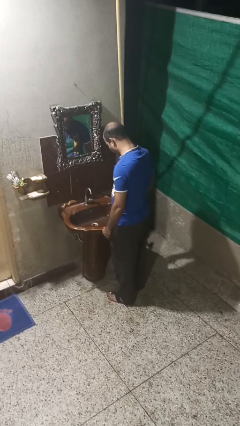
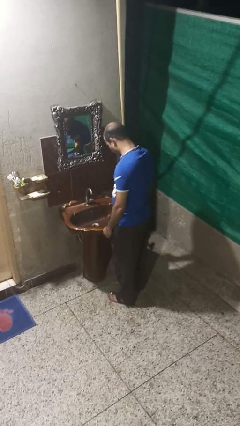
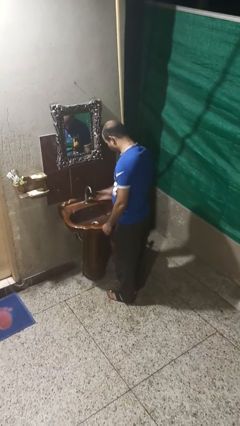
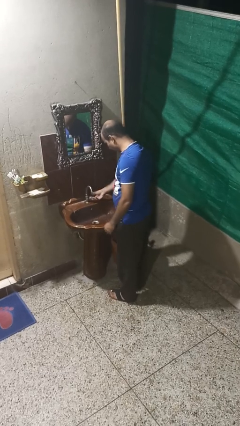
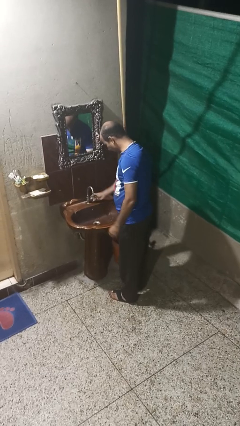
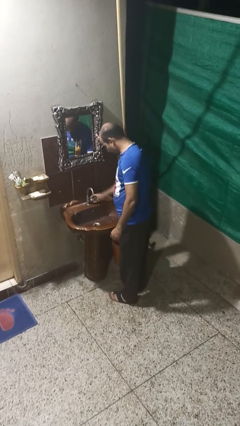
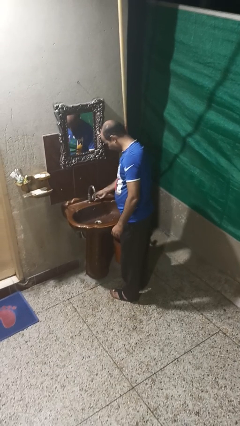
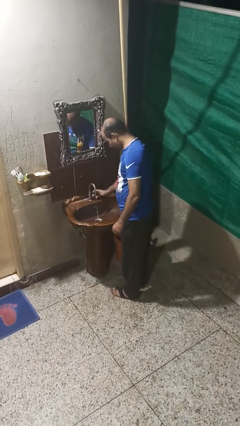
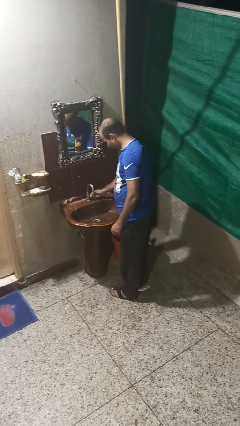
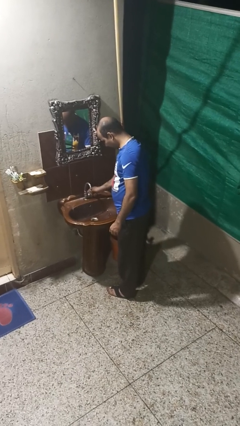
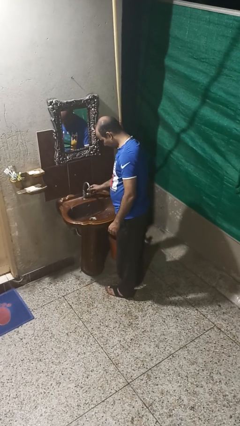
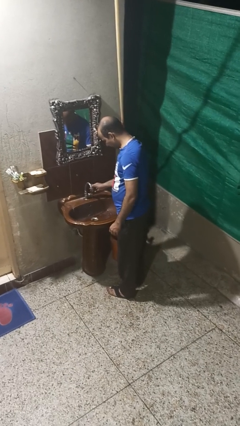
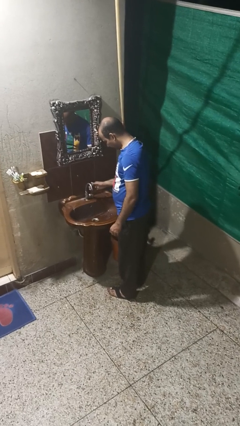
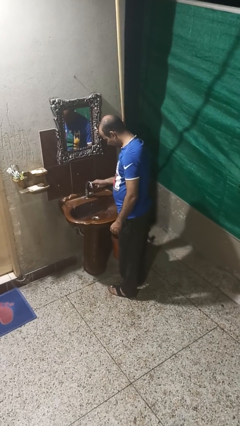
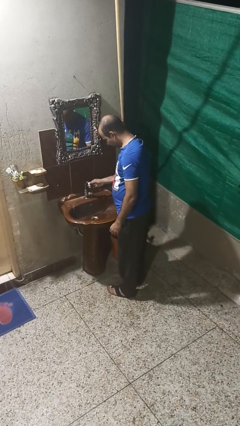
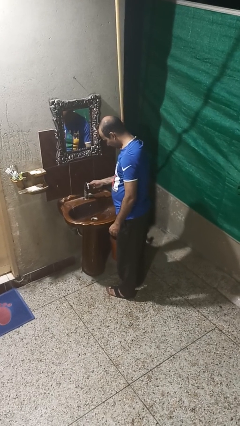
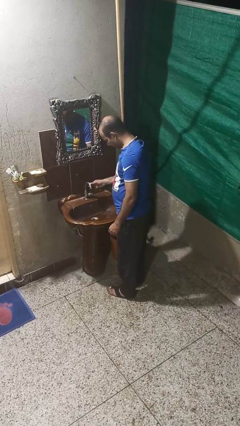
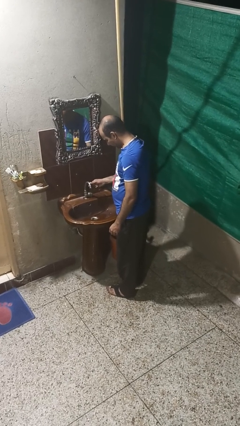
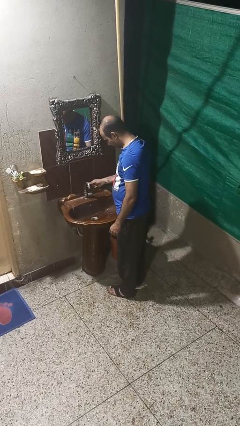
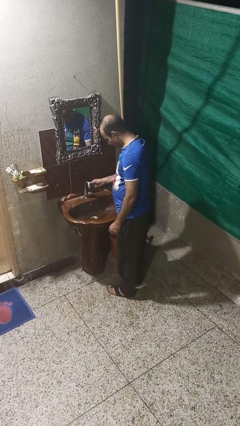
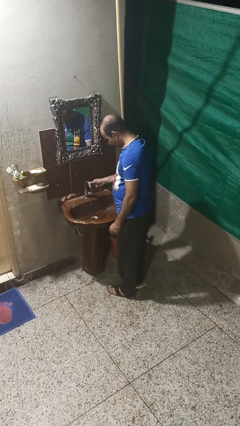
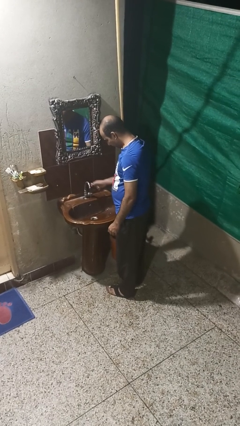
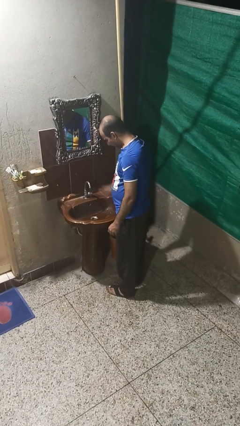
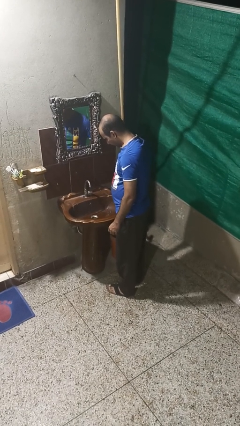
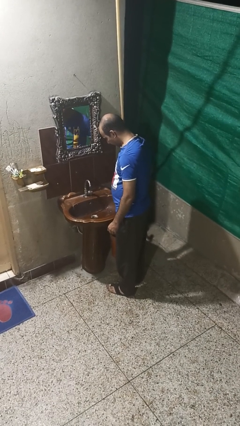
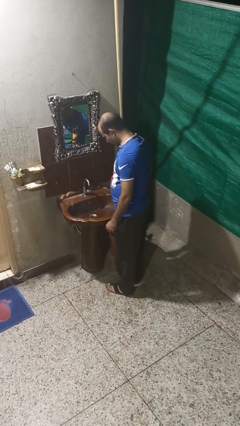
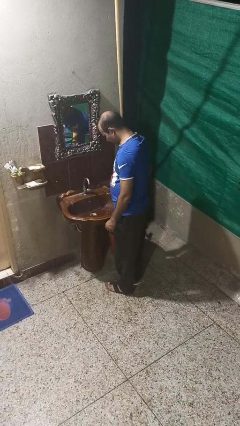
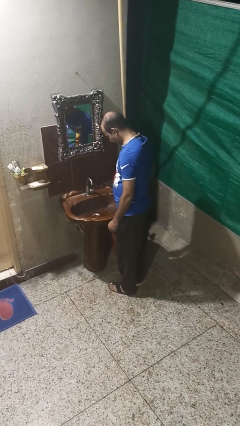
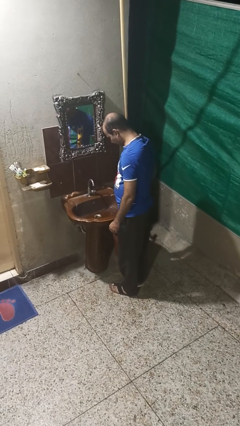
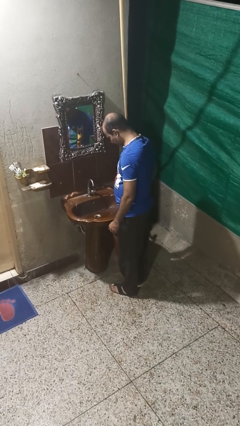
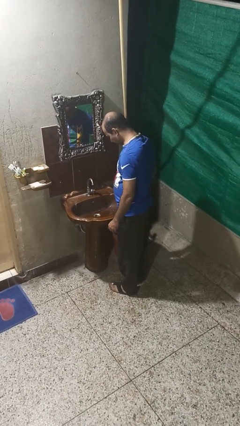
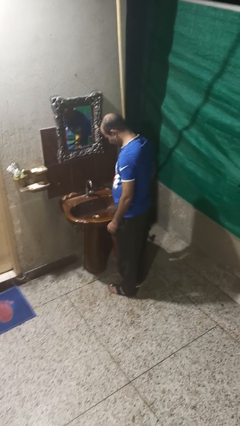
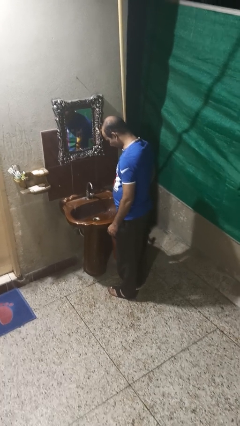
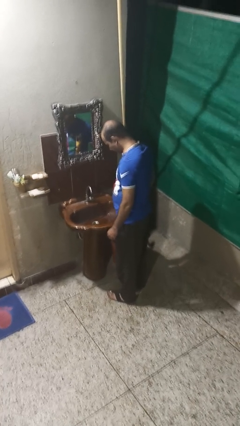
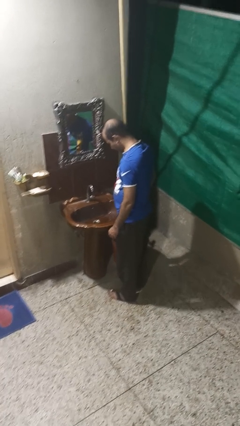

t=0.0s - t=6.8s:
person turns on faucet

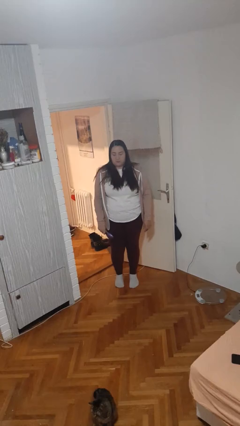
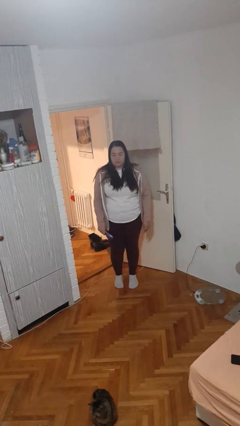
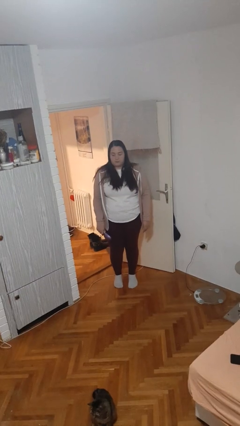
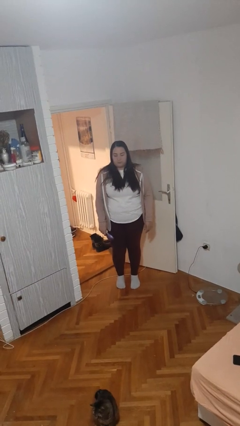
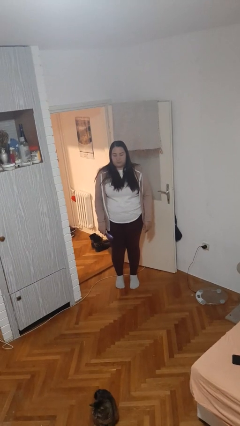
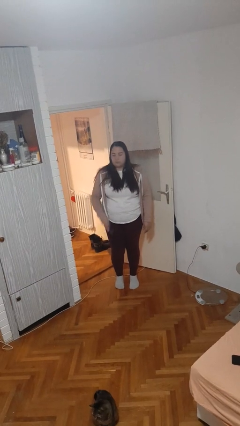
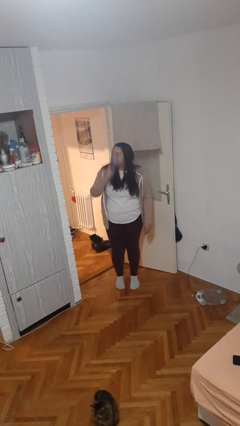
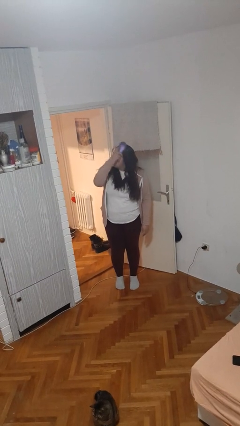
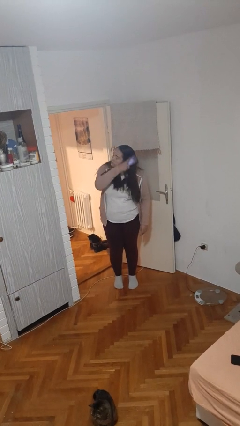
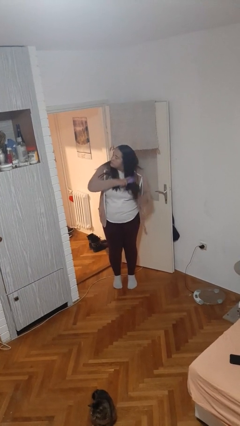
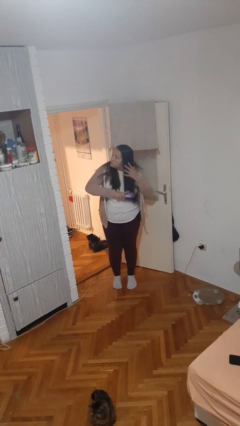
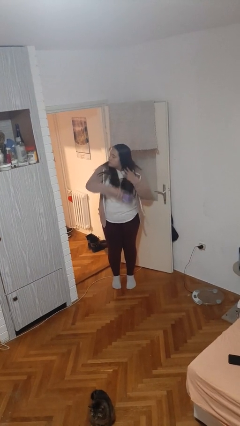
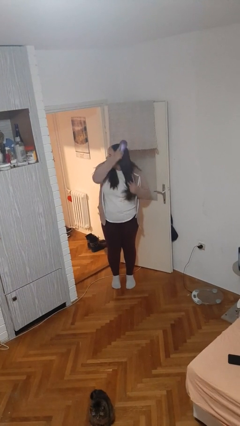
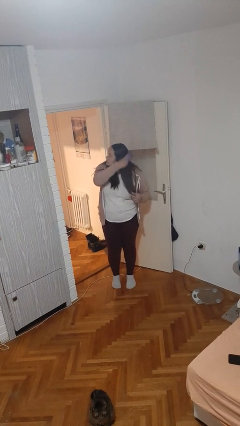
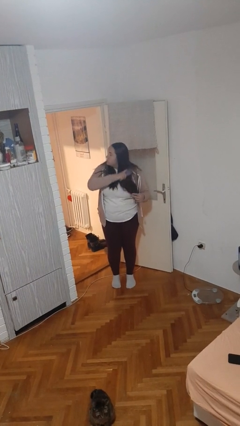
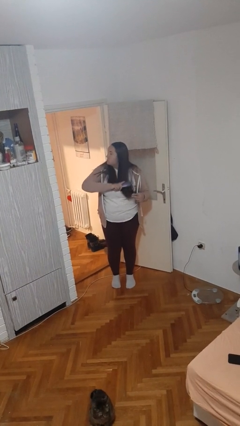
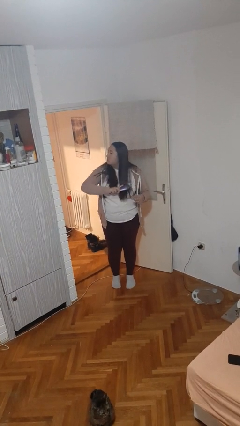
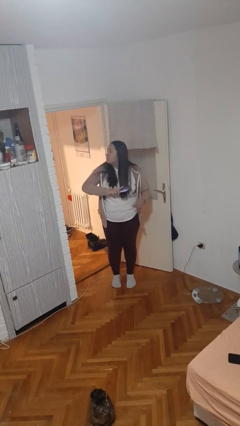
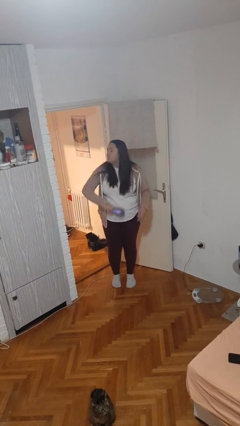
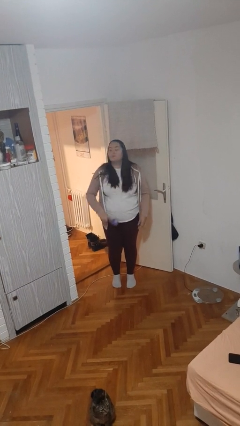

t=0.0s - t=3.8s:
person brushes hair

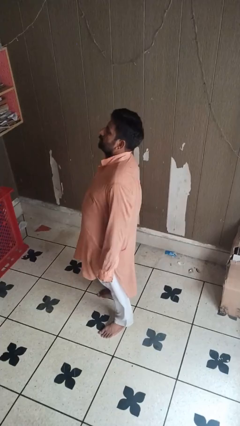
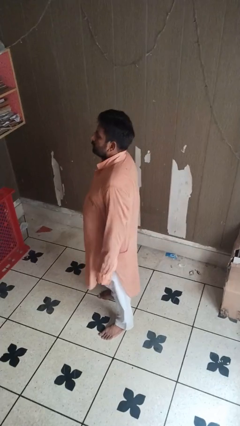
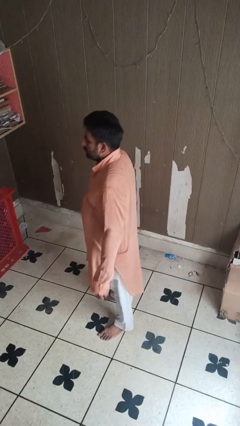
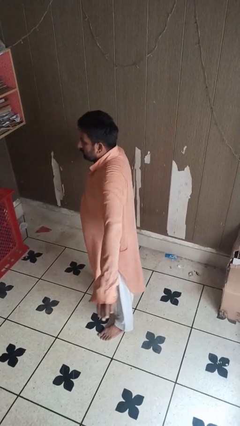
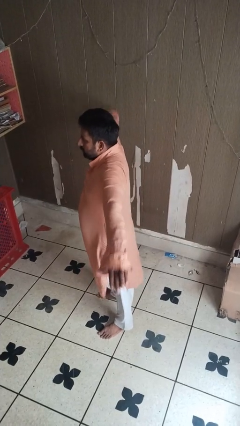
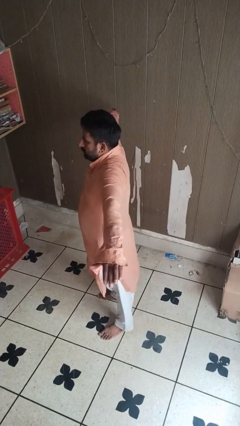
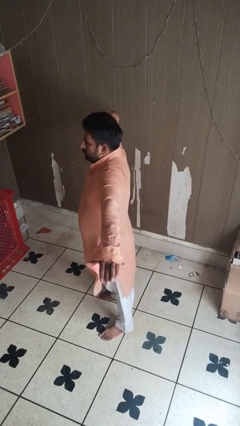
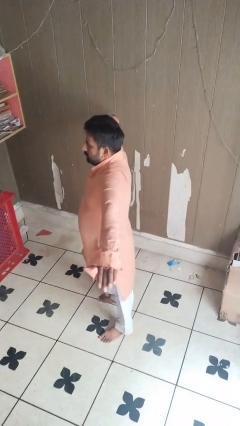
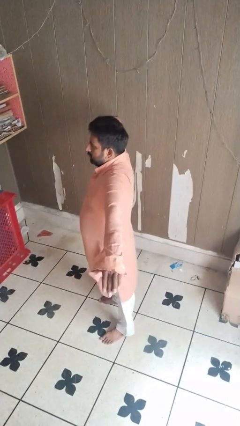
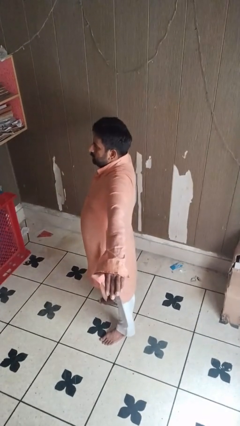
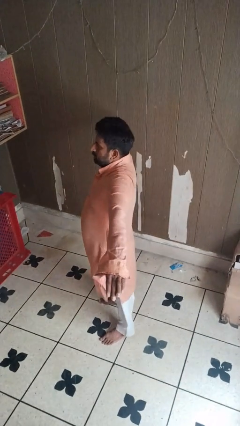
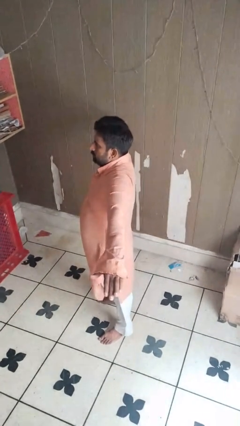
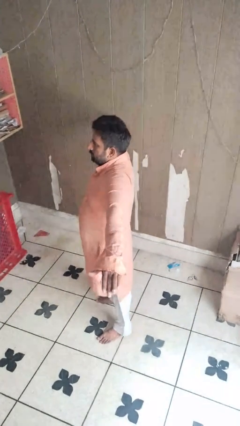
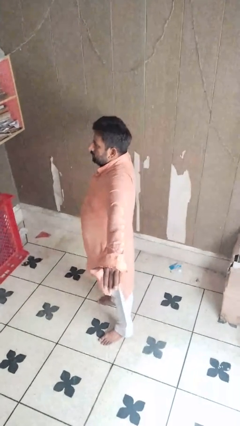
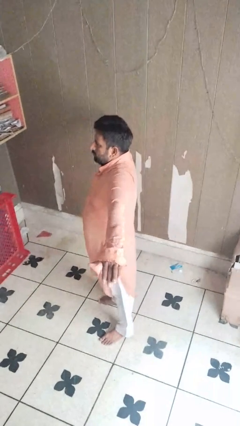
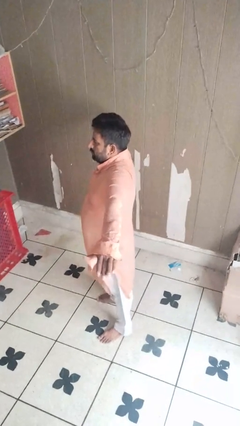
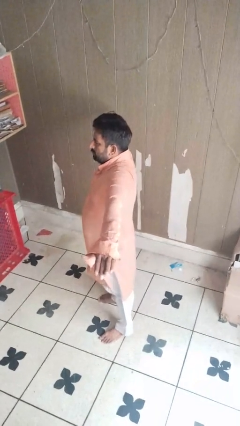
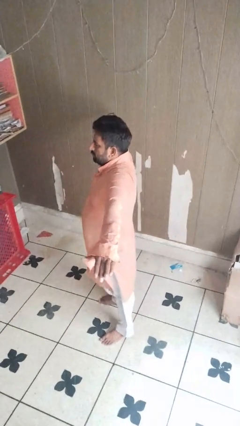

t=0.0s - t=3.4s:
person stretches arms to side

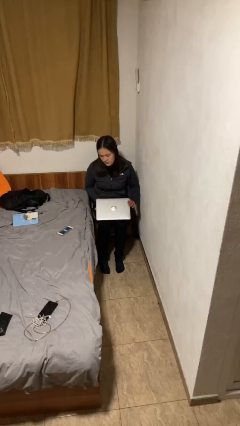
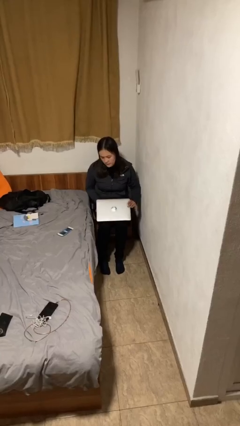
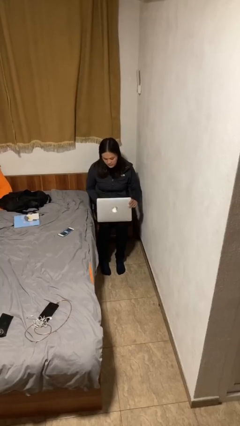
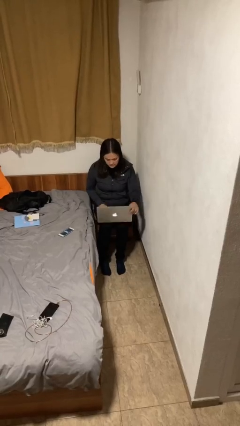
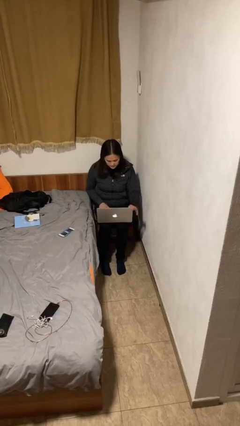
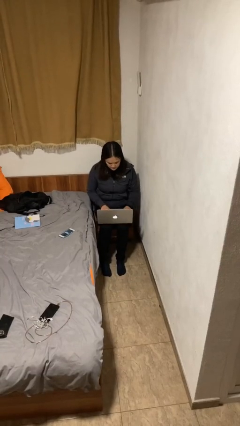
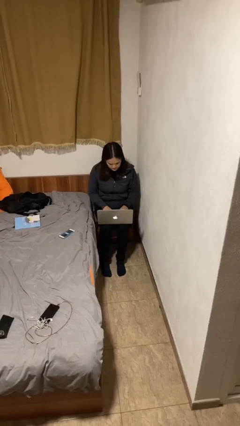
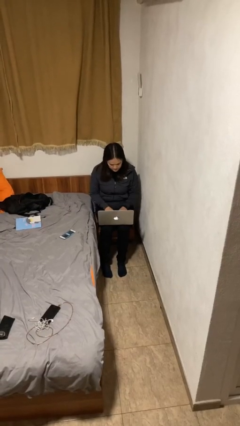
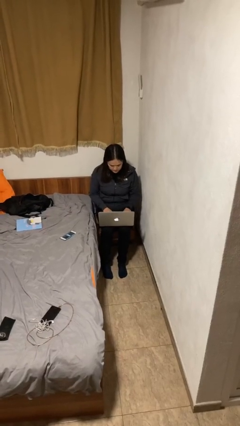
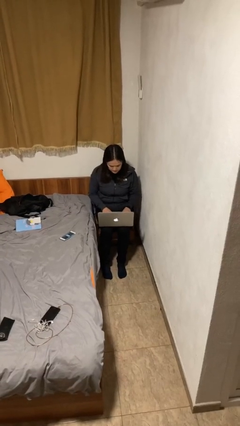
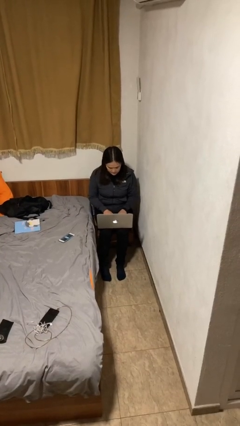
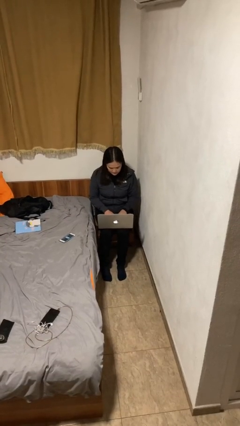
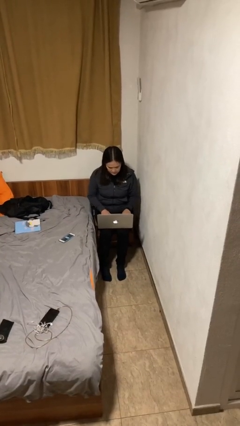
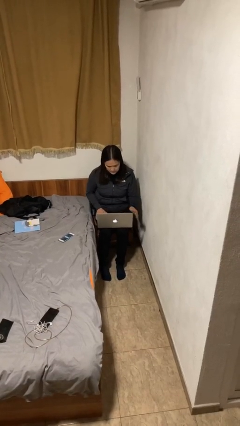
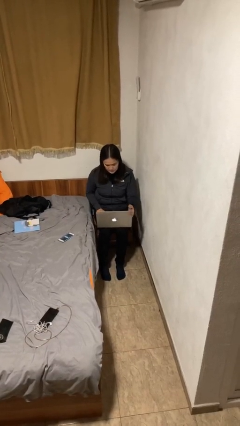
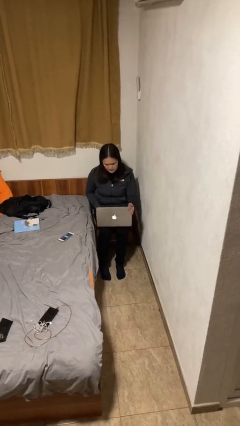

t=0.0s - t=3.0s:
person interacts with laptop

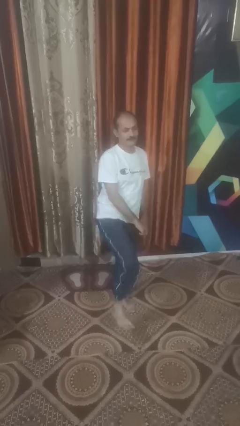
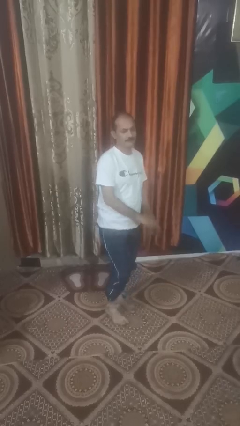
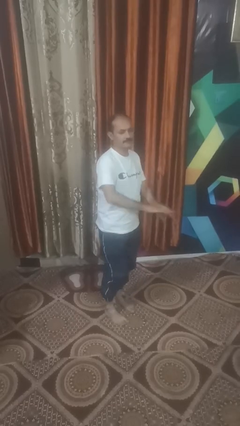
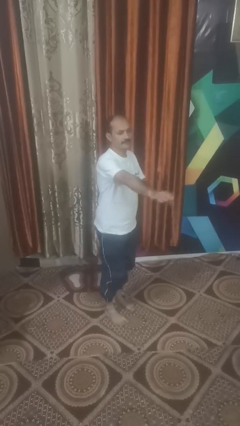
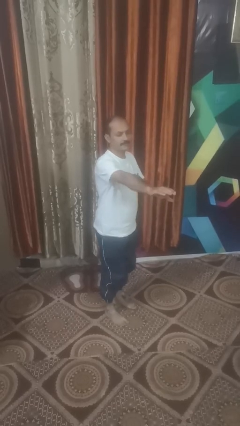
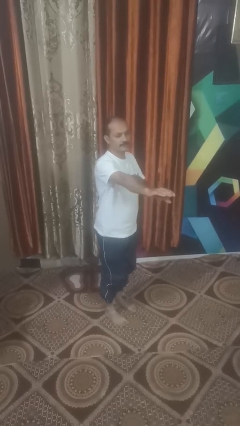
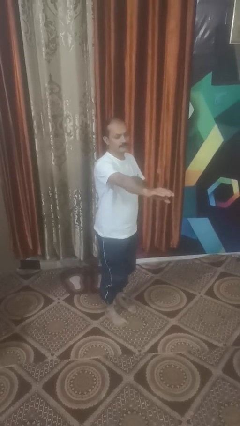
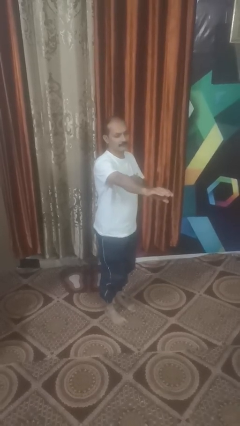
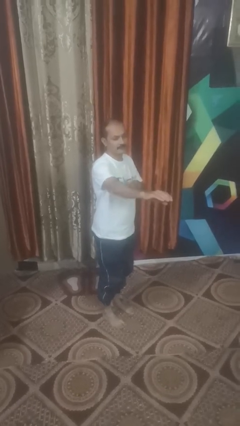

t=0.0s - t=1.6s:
person karate chop
